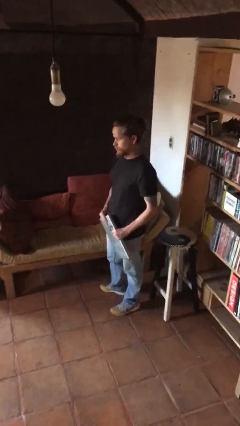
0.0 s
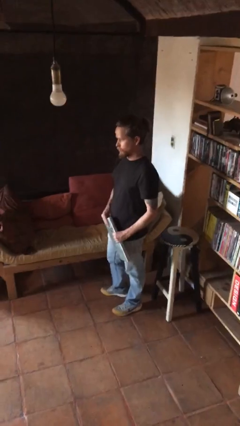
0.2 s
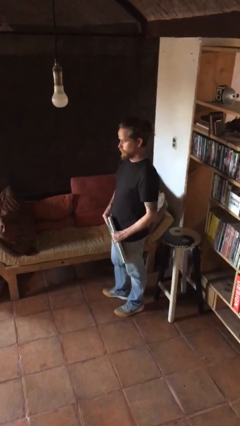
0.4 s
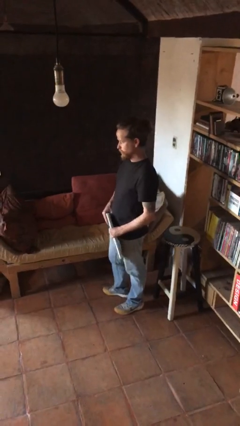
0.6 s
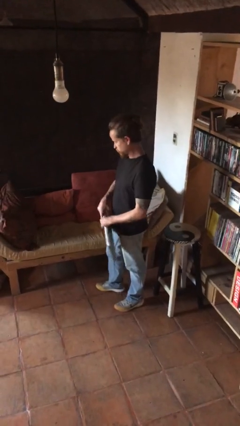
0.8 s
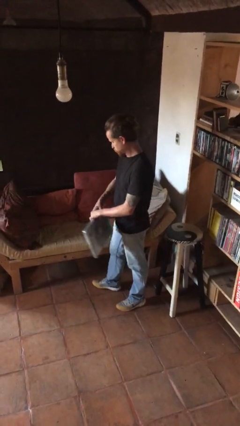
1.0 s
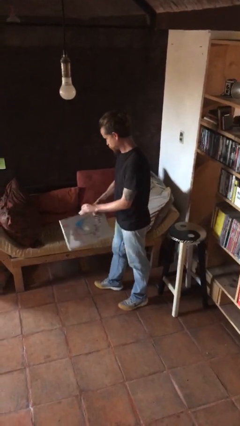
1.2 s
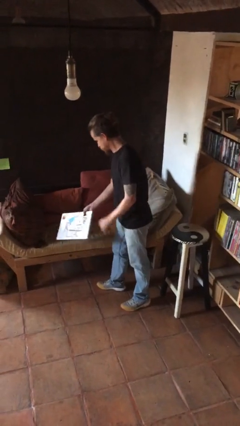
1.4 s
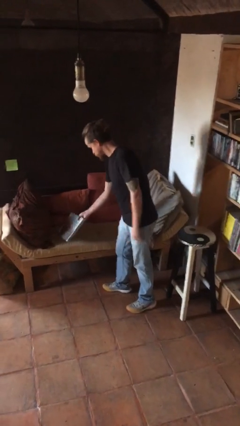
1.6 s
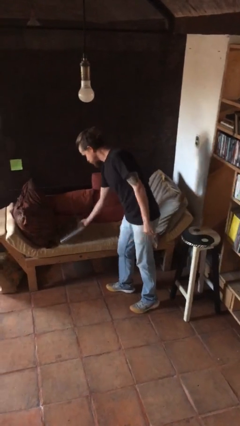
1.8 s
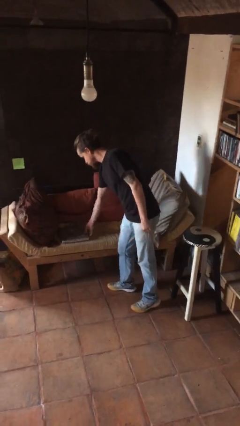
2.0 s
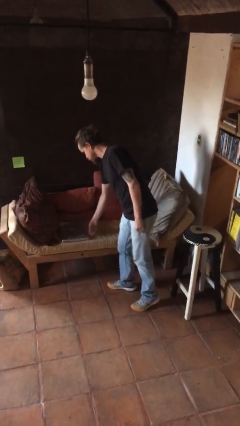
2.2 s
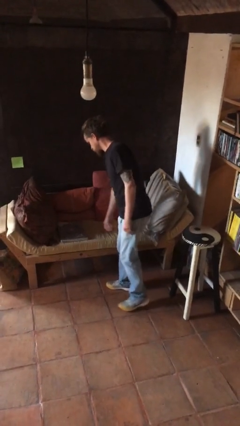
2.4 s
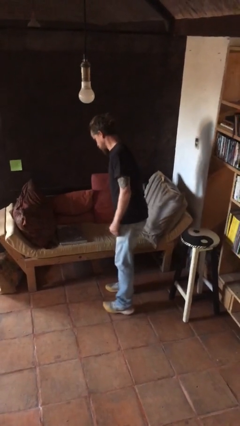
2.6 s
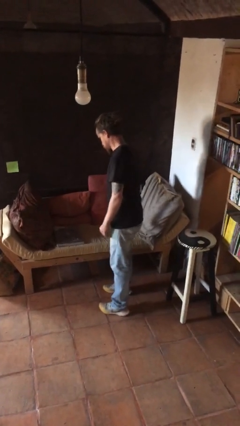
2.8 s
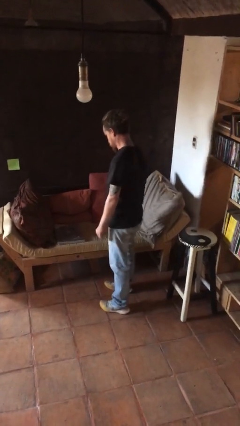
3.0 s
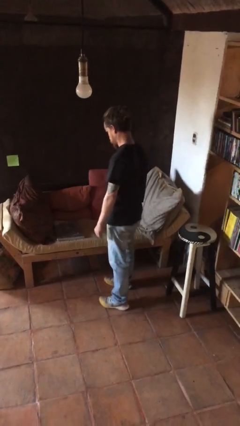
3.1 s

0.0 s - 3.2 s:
person puts down object on couch

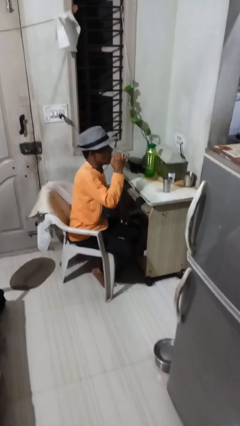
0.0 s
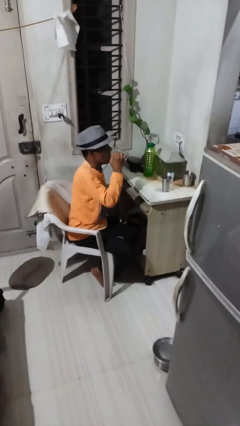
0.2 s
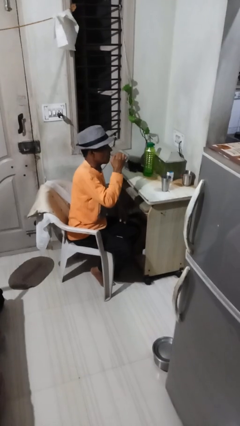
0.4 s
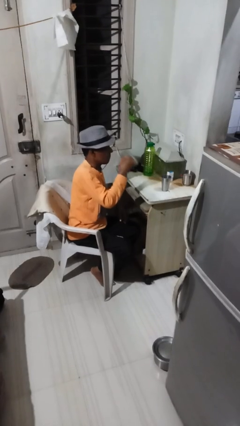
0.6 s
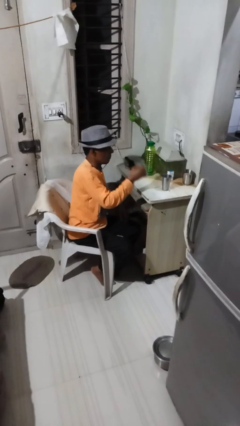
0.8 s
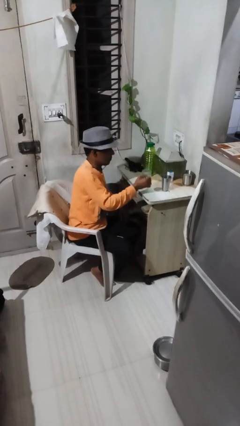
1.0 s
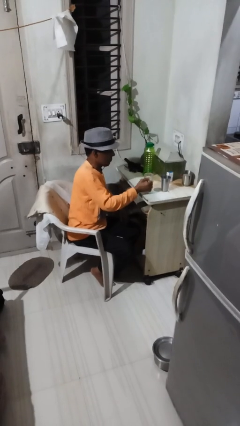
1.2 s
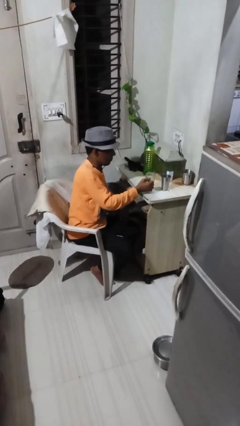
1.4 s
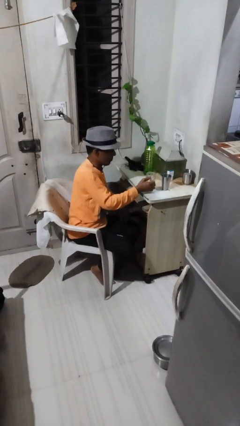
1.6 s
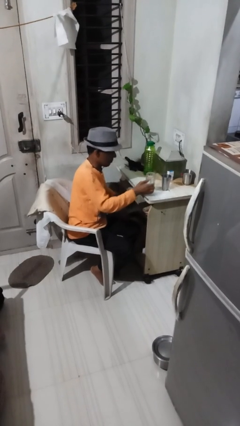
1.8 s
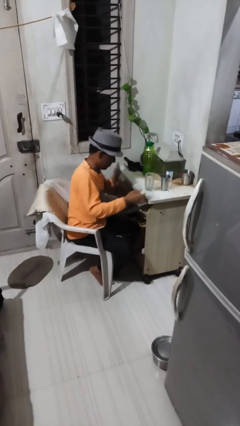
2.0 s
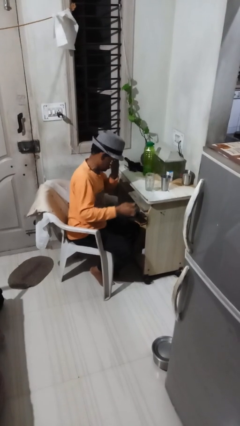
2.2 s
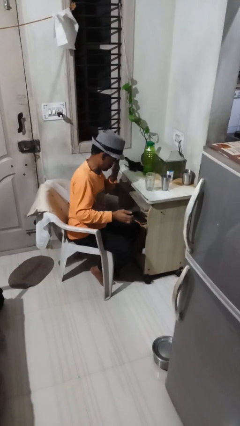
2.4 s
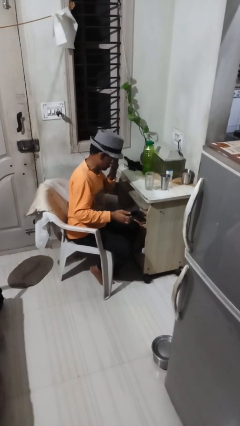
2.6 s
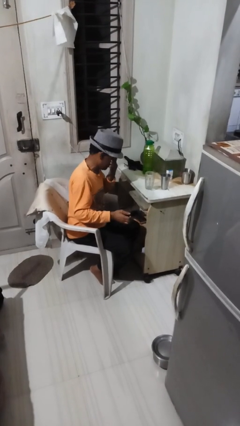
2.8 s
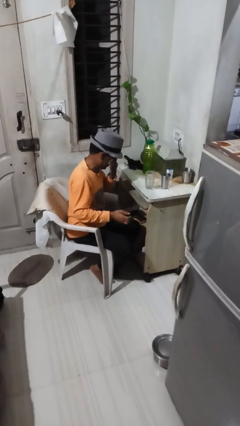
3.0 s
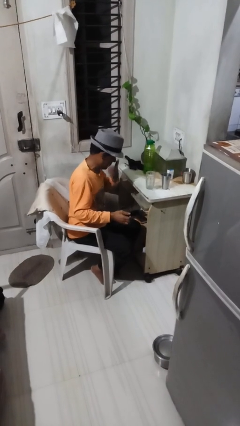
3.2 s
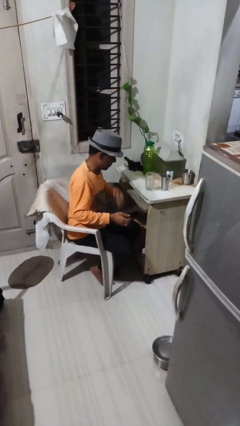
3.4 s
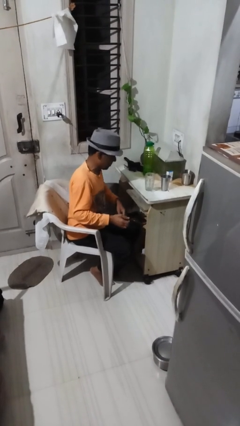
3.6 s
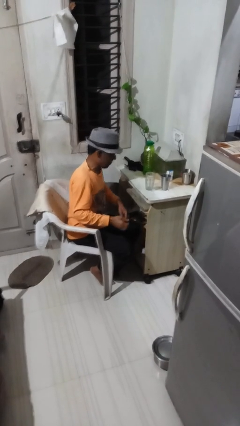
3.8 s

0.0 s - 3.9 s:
person puts down object on table

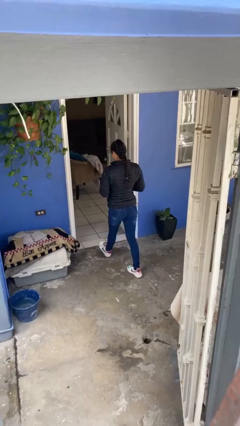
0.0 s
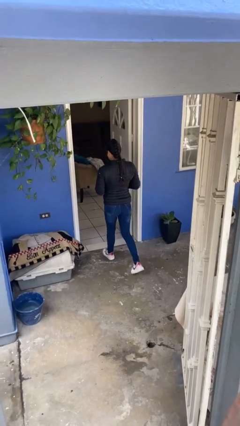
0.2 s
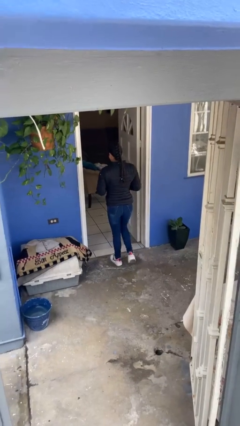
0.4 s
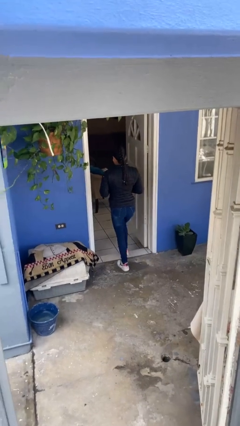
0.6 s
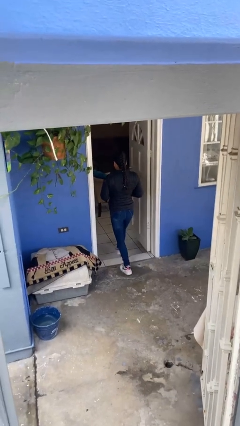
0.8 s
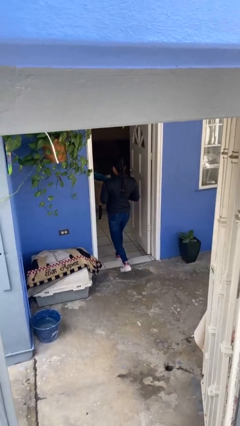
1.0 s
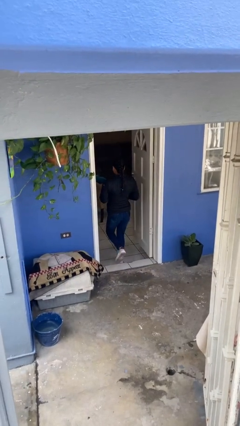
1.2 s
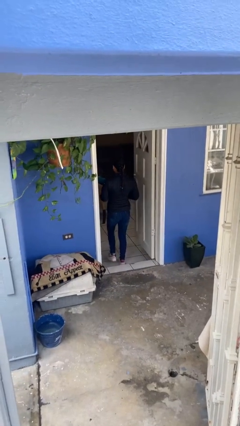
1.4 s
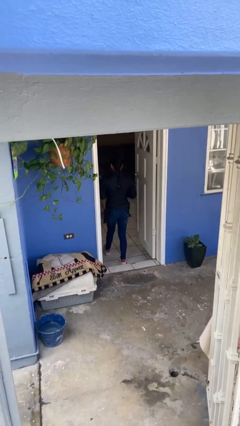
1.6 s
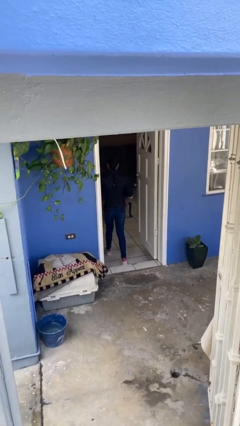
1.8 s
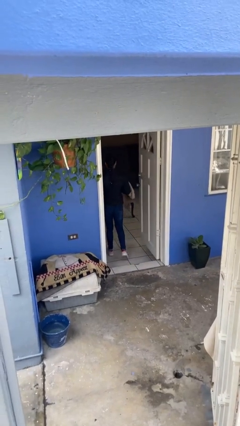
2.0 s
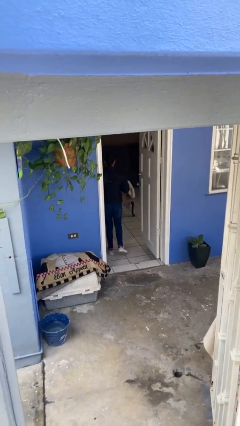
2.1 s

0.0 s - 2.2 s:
person exits scene through structure

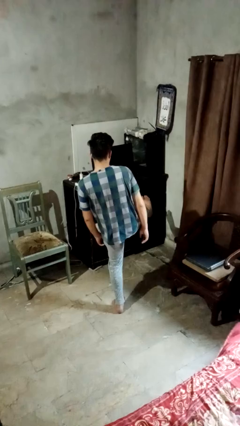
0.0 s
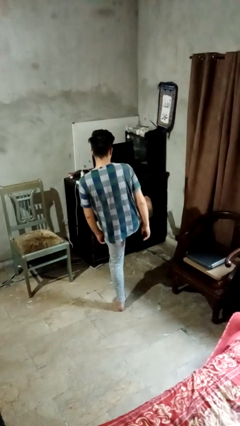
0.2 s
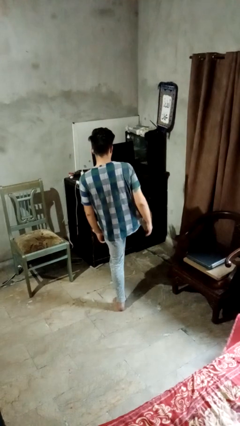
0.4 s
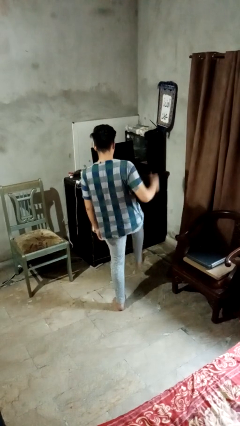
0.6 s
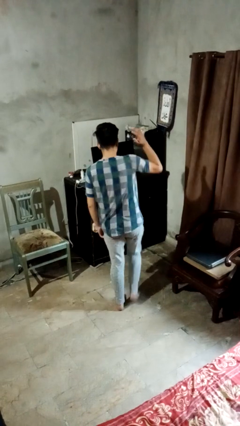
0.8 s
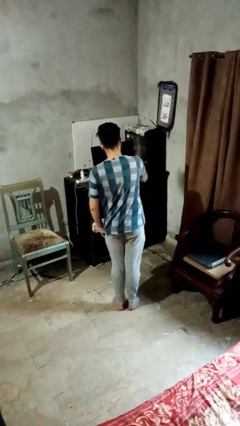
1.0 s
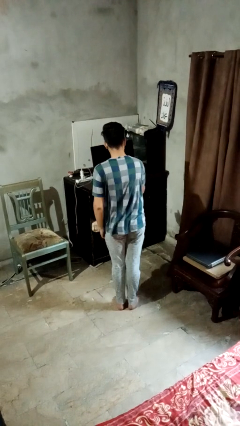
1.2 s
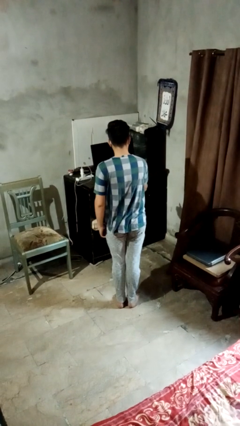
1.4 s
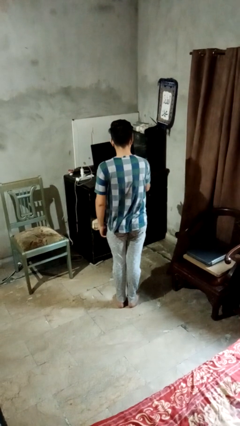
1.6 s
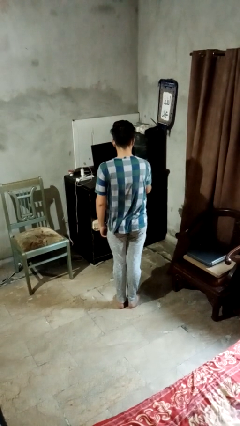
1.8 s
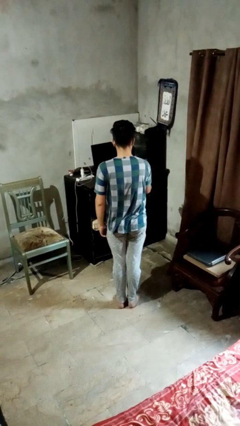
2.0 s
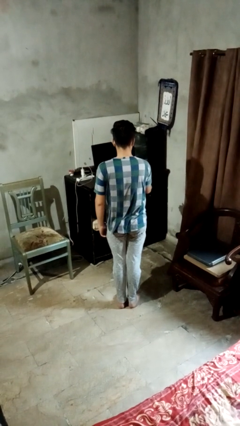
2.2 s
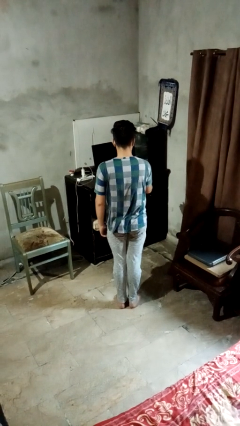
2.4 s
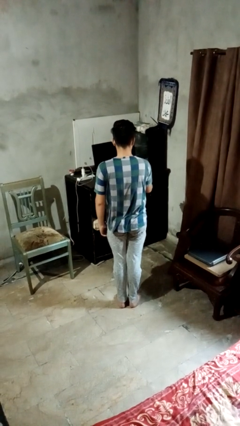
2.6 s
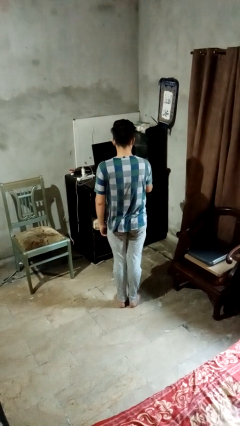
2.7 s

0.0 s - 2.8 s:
person karate chop

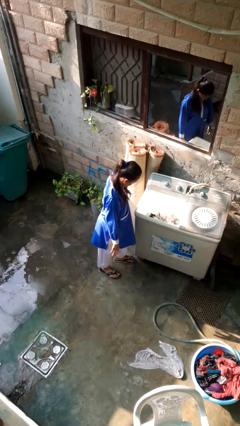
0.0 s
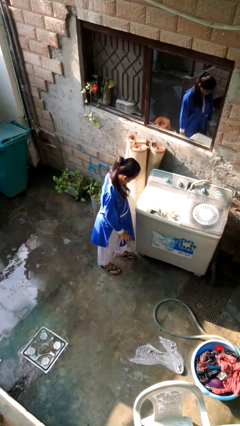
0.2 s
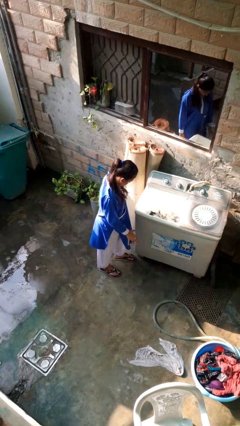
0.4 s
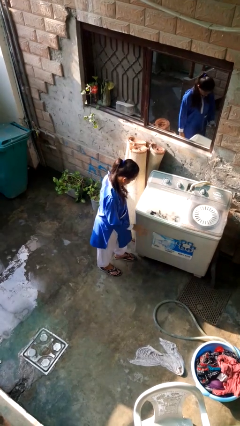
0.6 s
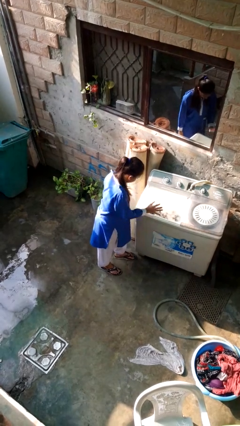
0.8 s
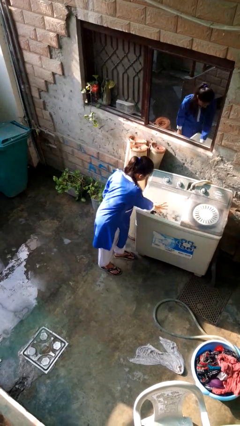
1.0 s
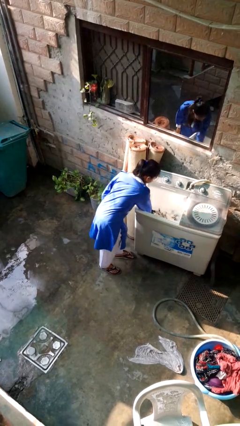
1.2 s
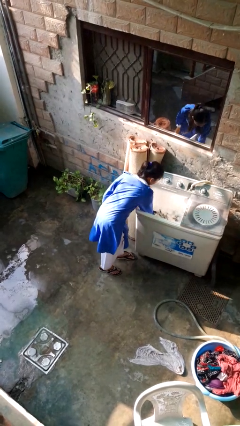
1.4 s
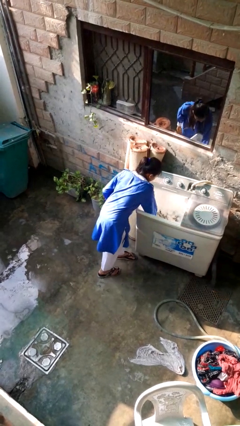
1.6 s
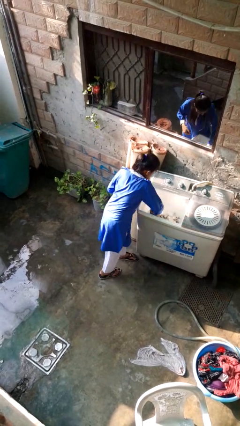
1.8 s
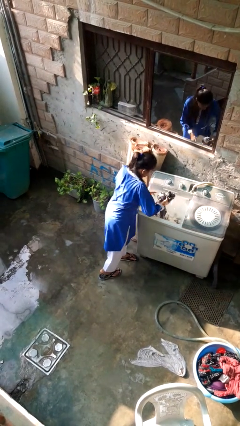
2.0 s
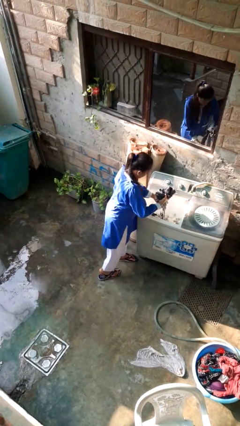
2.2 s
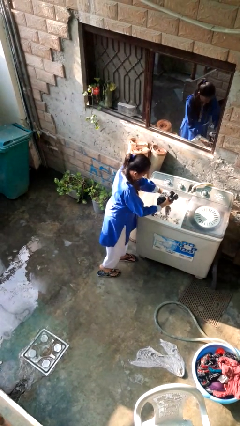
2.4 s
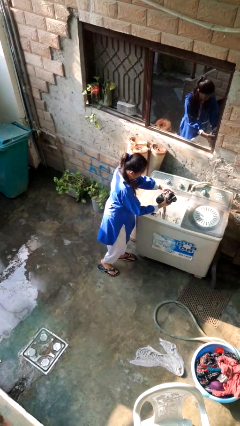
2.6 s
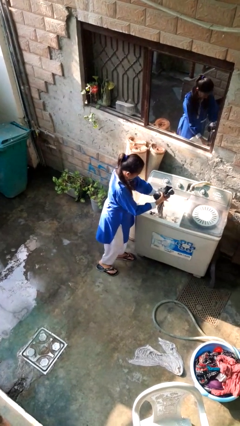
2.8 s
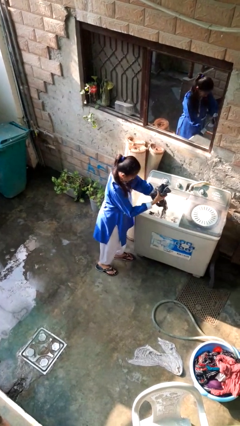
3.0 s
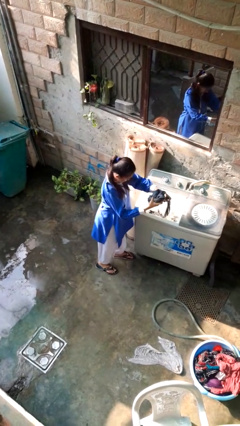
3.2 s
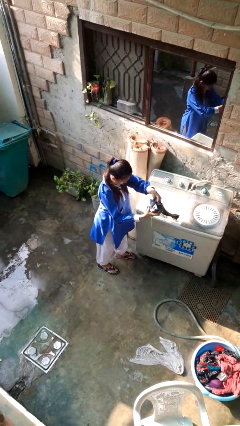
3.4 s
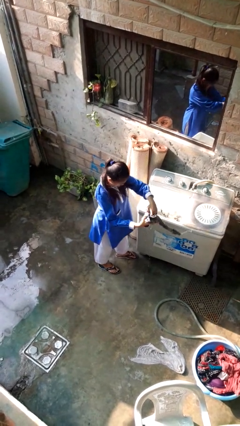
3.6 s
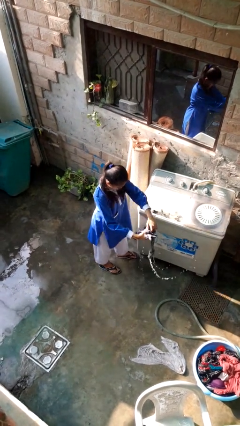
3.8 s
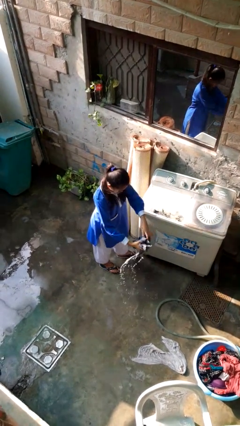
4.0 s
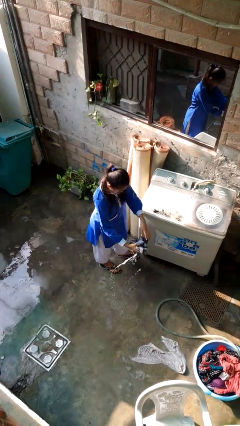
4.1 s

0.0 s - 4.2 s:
person unloads clotheswasher

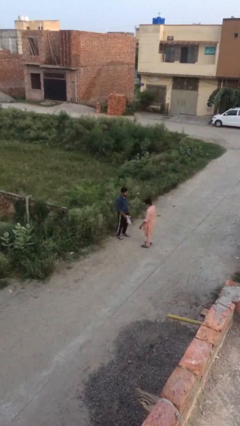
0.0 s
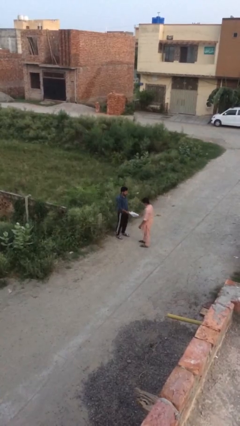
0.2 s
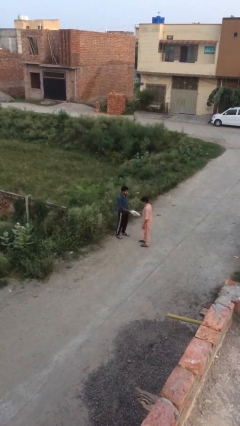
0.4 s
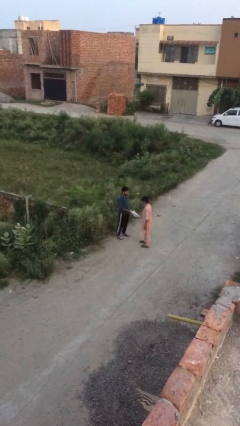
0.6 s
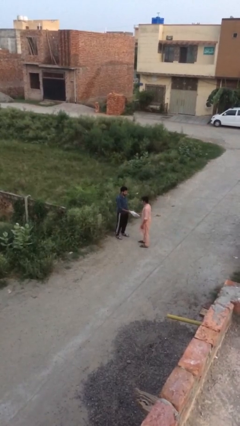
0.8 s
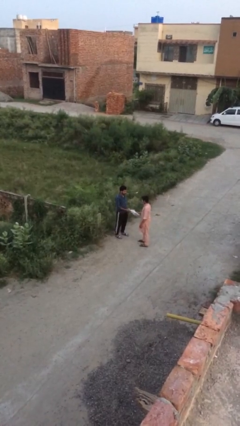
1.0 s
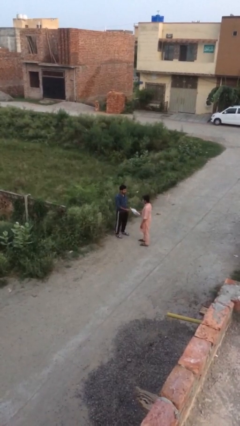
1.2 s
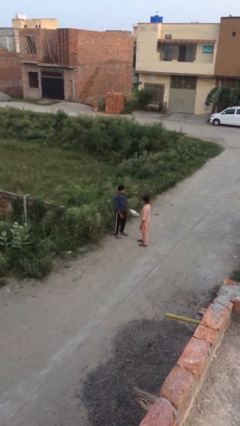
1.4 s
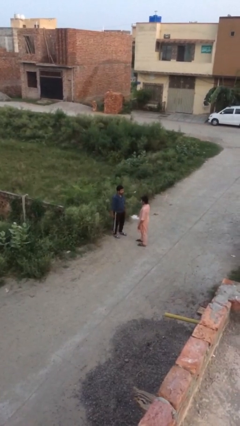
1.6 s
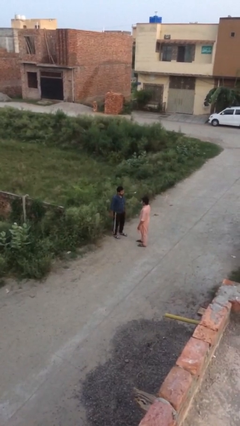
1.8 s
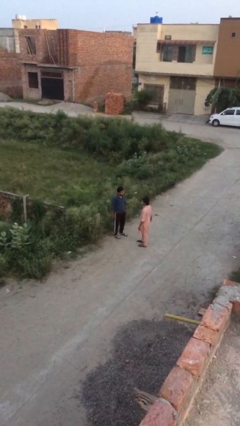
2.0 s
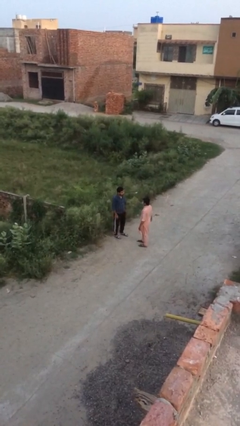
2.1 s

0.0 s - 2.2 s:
person transfers object to person
